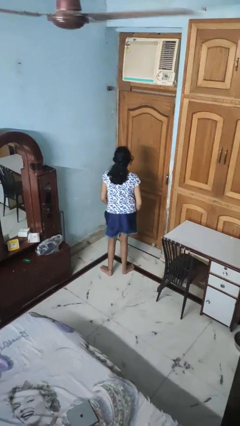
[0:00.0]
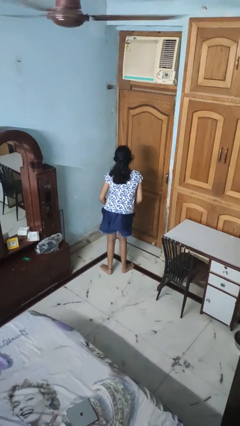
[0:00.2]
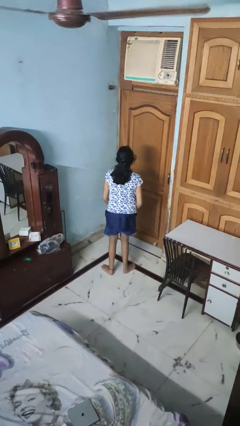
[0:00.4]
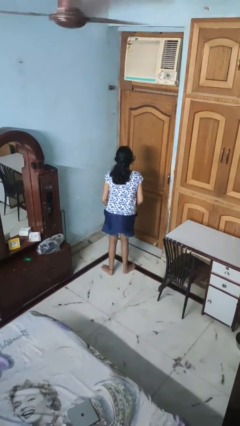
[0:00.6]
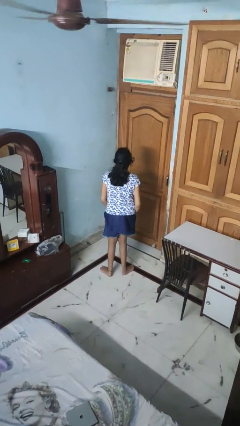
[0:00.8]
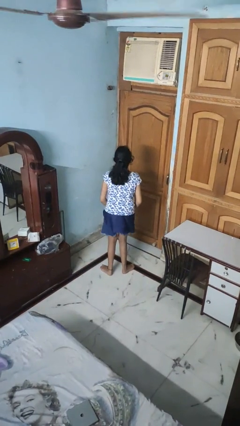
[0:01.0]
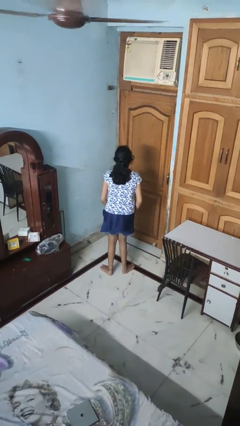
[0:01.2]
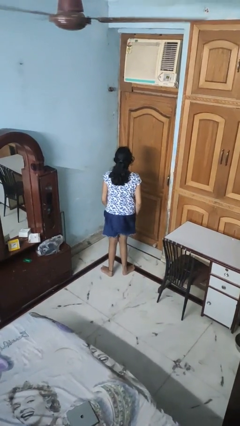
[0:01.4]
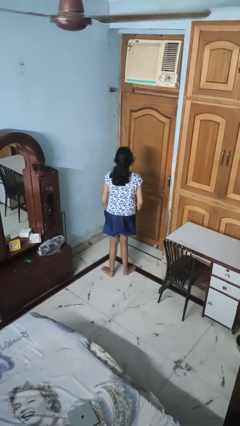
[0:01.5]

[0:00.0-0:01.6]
person wiggles hips

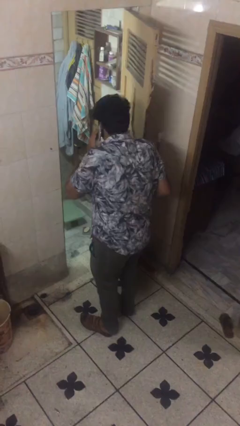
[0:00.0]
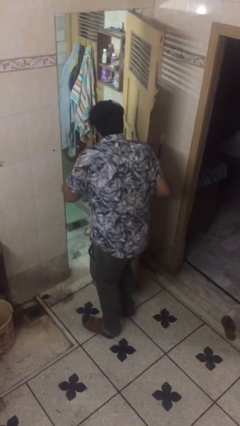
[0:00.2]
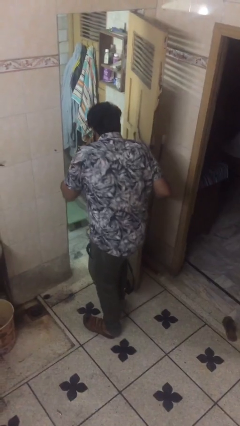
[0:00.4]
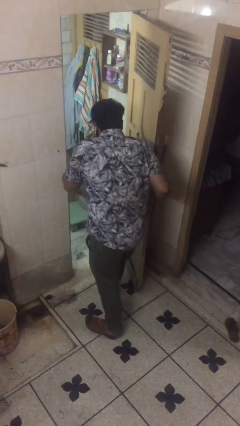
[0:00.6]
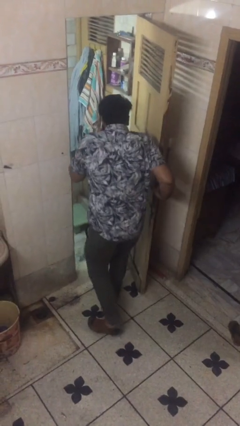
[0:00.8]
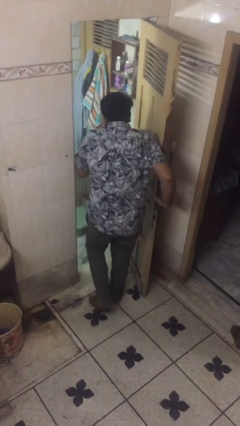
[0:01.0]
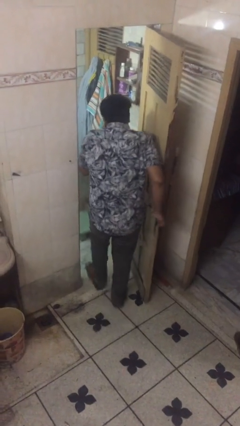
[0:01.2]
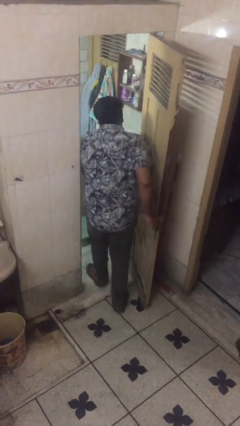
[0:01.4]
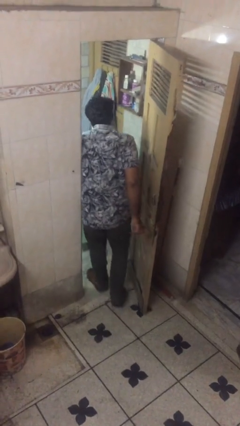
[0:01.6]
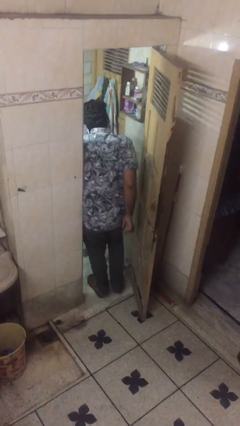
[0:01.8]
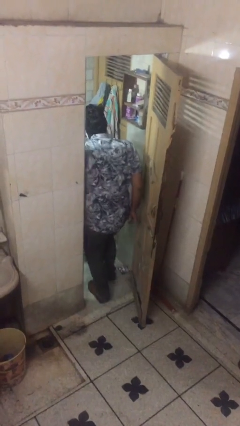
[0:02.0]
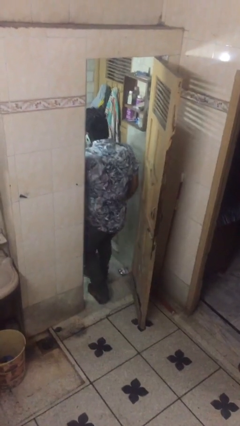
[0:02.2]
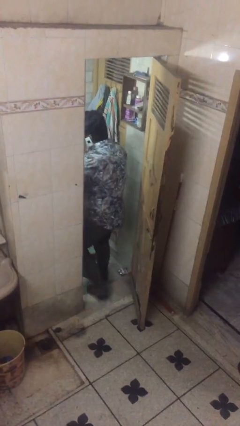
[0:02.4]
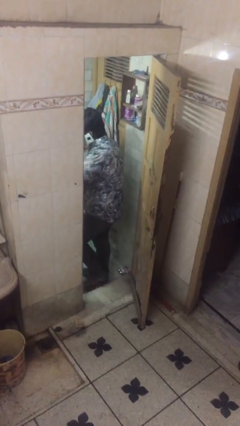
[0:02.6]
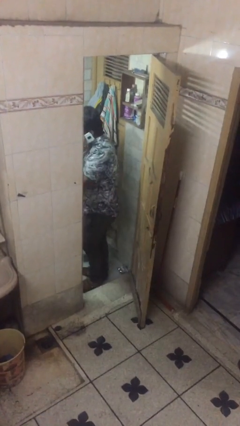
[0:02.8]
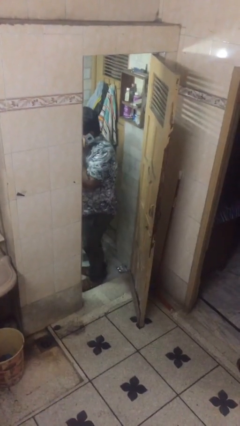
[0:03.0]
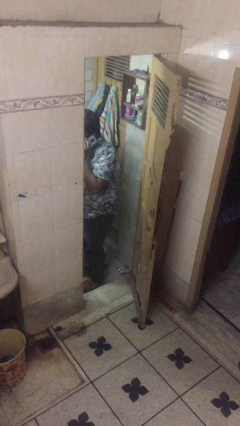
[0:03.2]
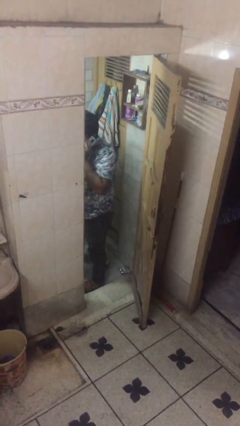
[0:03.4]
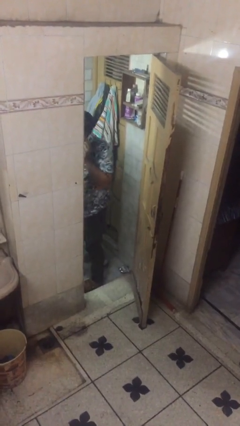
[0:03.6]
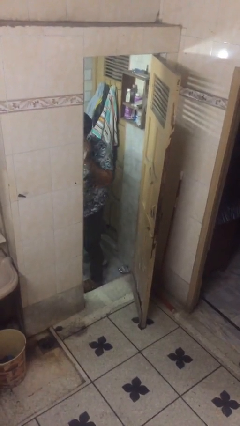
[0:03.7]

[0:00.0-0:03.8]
person exits scene through structure

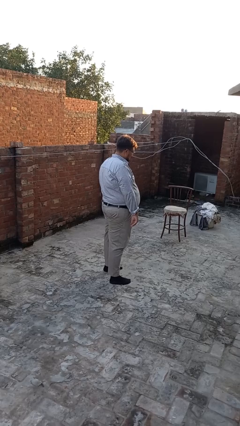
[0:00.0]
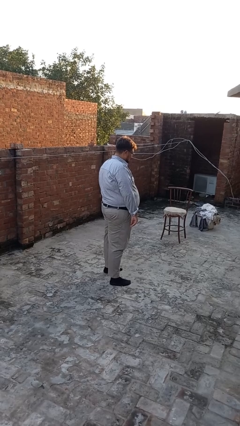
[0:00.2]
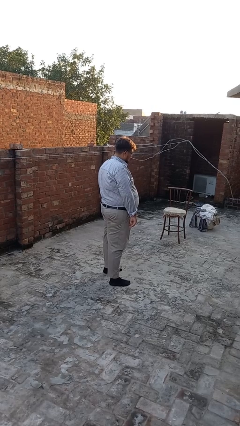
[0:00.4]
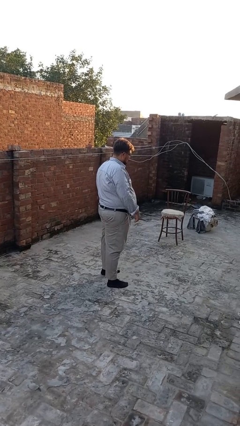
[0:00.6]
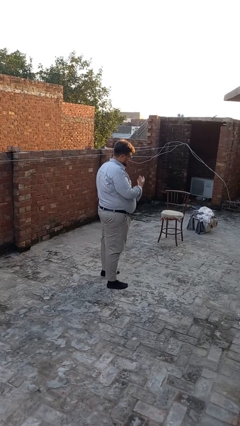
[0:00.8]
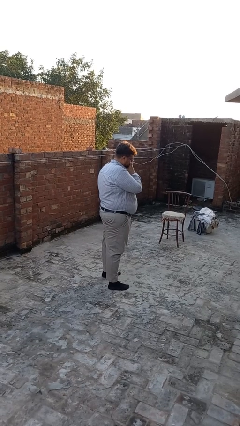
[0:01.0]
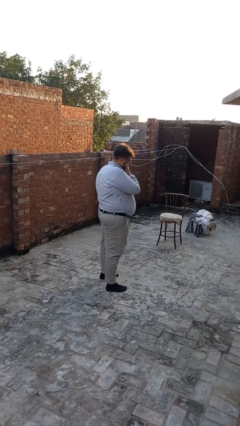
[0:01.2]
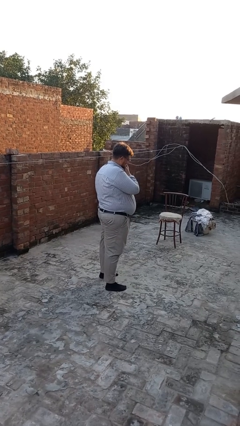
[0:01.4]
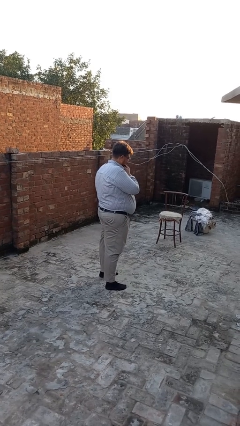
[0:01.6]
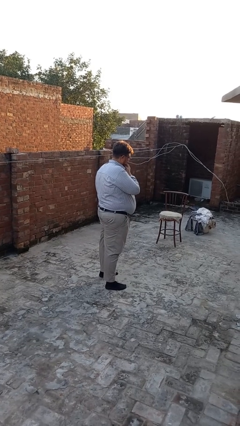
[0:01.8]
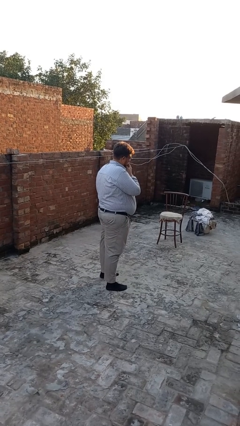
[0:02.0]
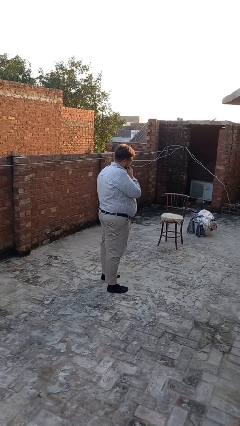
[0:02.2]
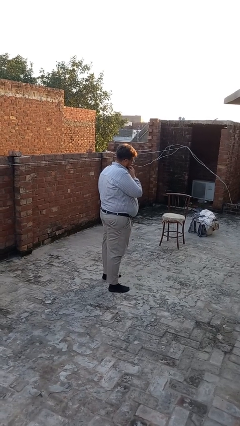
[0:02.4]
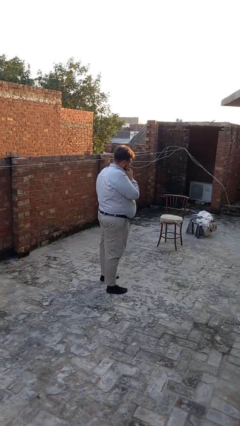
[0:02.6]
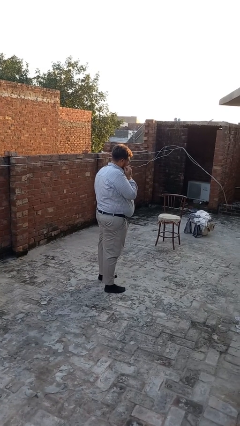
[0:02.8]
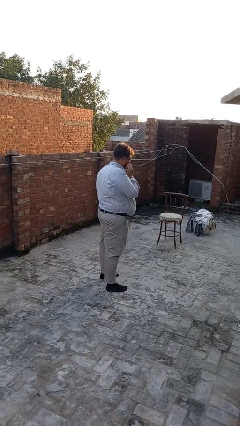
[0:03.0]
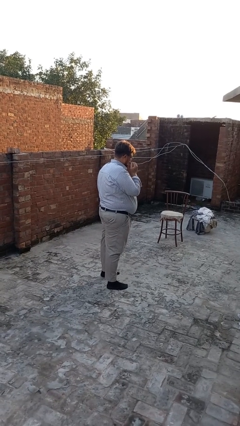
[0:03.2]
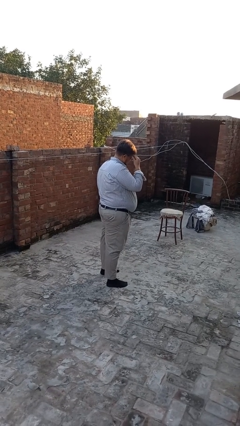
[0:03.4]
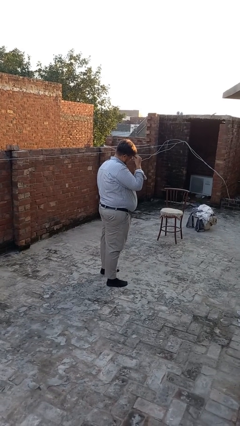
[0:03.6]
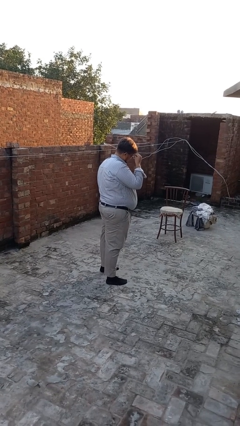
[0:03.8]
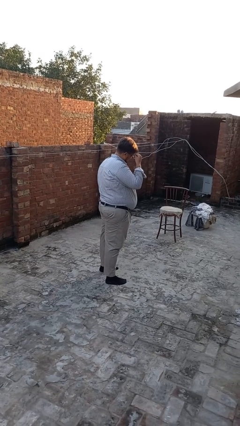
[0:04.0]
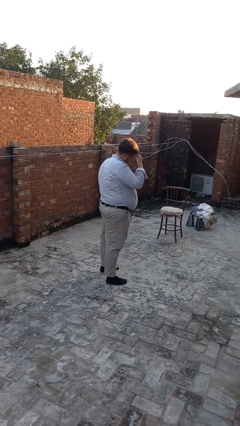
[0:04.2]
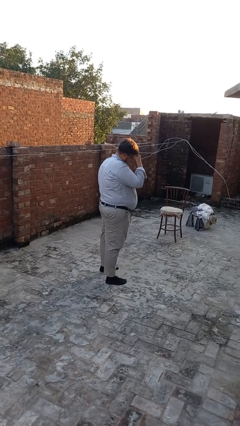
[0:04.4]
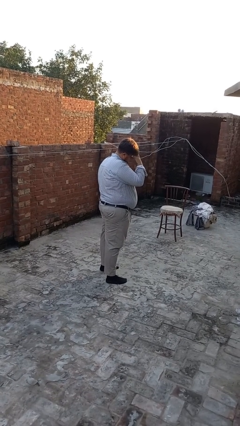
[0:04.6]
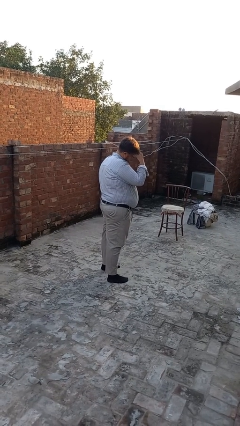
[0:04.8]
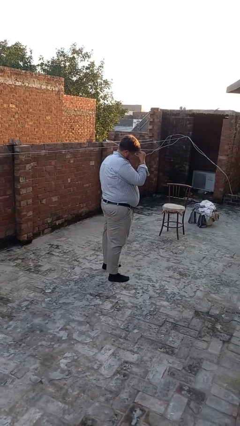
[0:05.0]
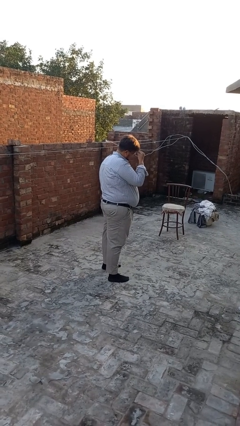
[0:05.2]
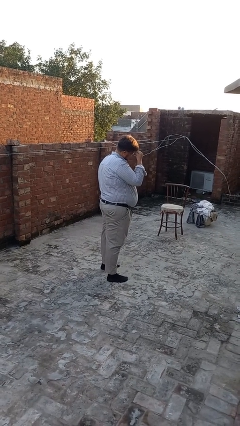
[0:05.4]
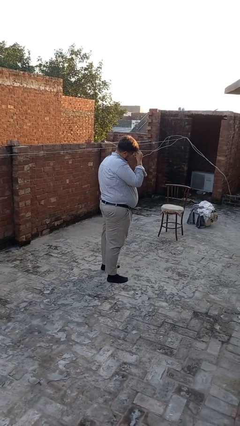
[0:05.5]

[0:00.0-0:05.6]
person scratches face

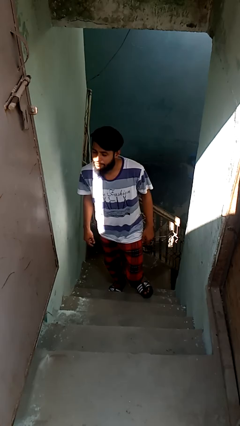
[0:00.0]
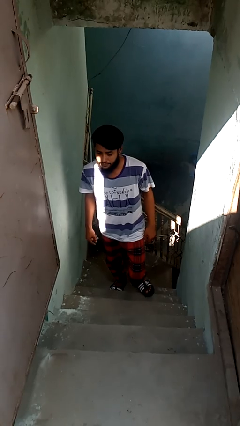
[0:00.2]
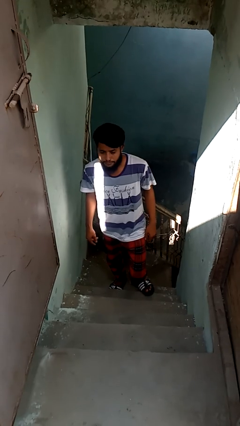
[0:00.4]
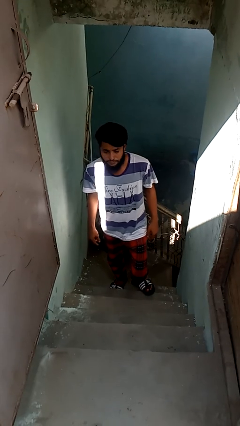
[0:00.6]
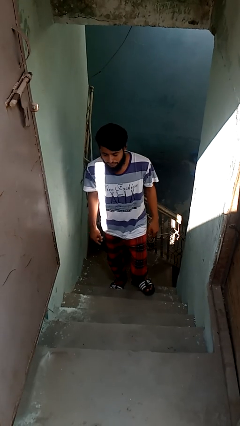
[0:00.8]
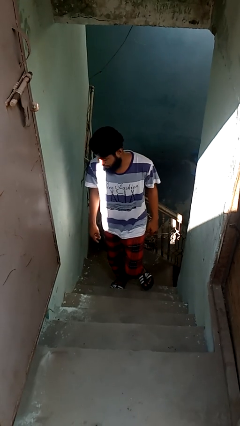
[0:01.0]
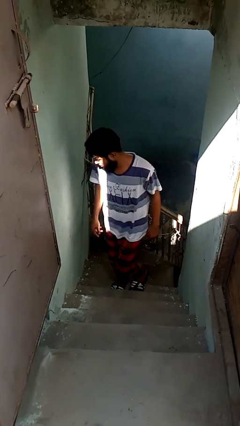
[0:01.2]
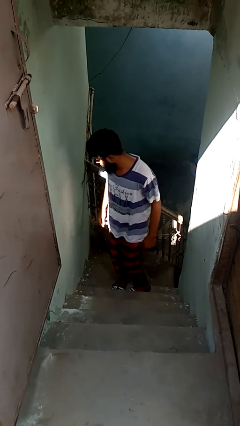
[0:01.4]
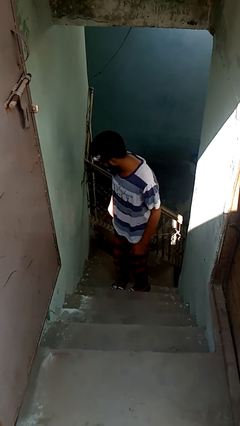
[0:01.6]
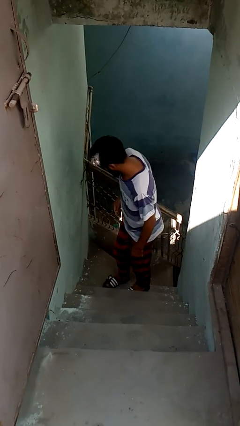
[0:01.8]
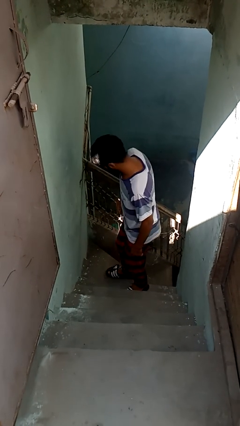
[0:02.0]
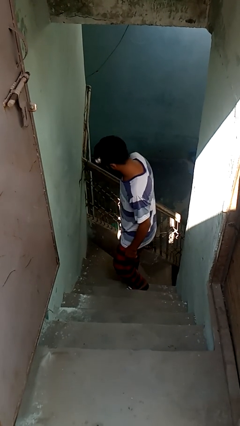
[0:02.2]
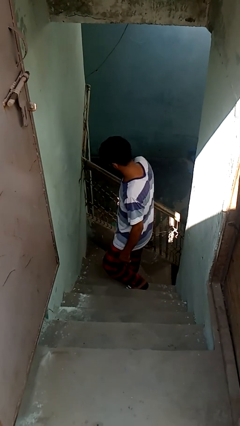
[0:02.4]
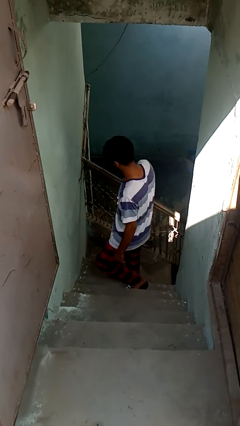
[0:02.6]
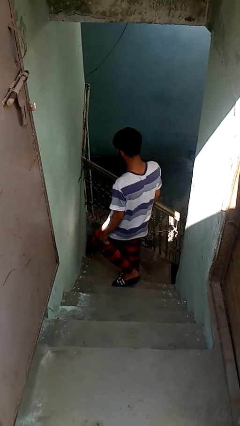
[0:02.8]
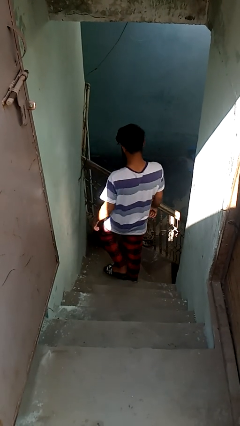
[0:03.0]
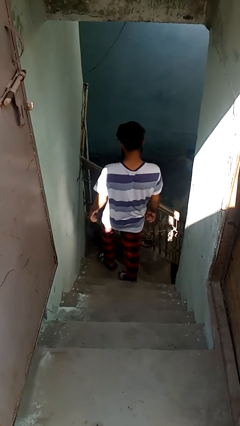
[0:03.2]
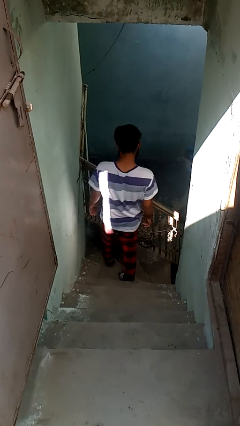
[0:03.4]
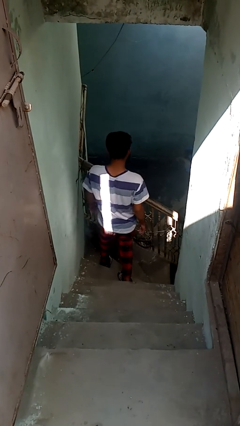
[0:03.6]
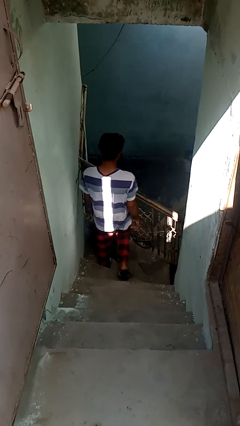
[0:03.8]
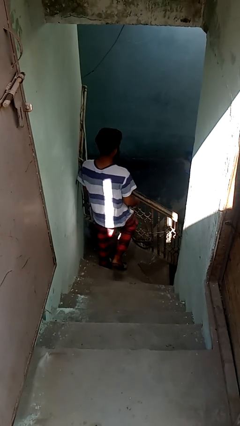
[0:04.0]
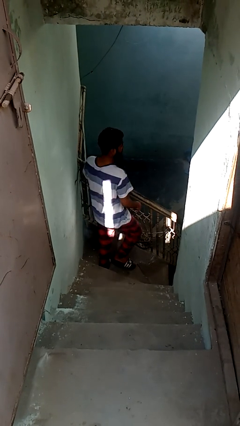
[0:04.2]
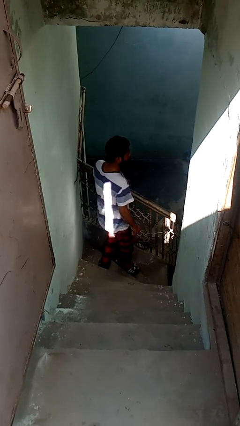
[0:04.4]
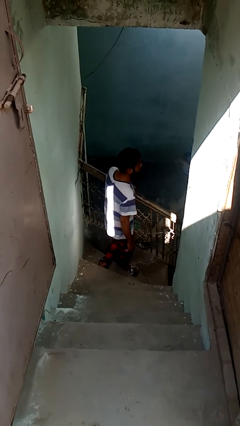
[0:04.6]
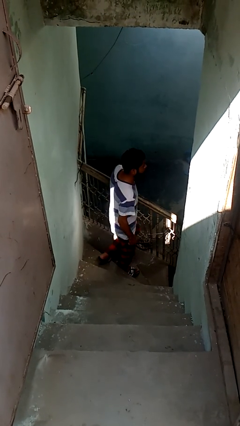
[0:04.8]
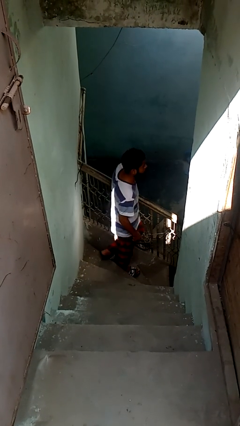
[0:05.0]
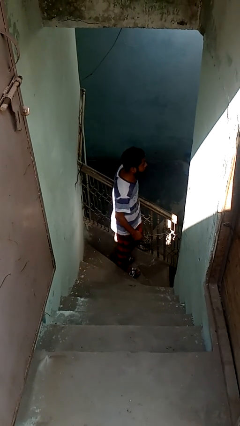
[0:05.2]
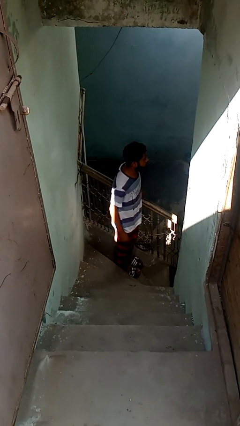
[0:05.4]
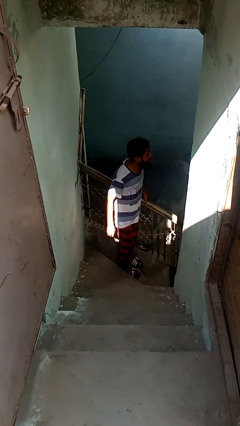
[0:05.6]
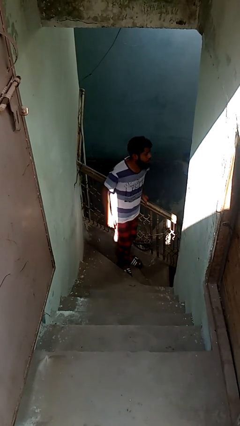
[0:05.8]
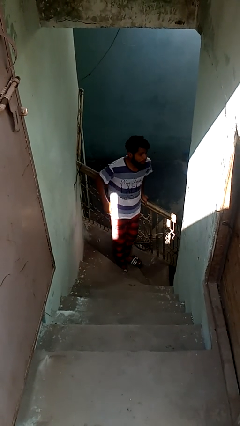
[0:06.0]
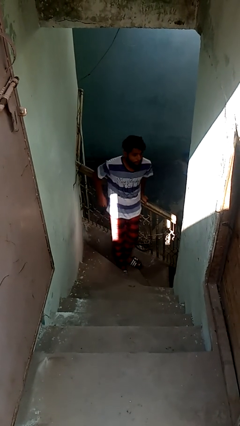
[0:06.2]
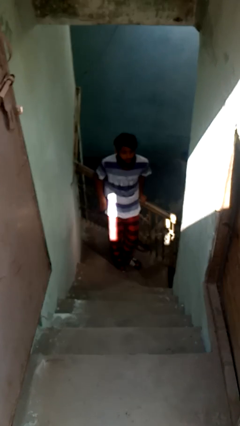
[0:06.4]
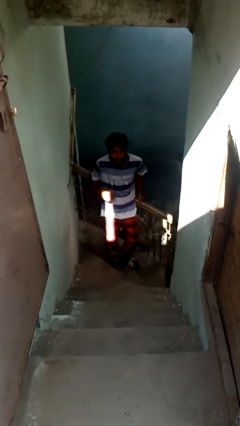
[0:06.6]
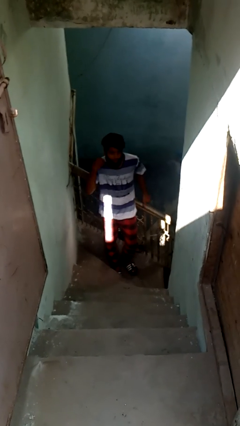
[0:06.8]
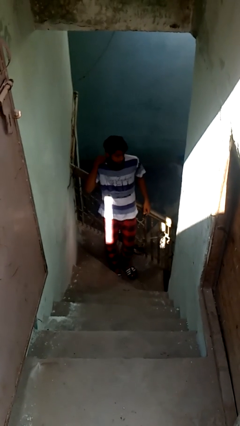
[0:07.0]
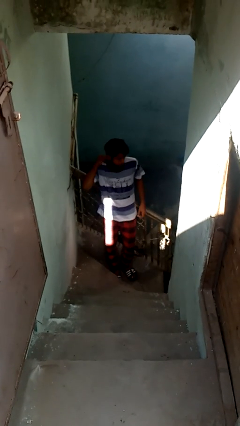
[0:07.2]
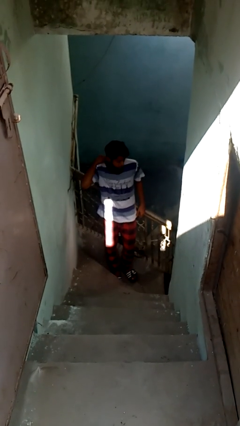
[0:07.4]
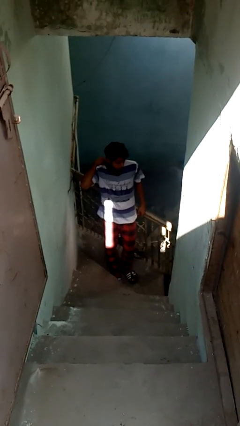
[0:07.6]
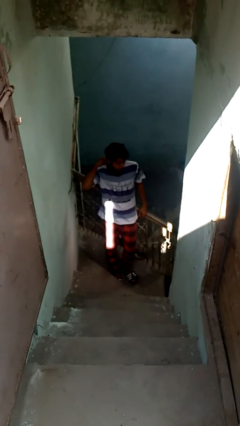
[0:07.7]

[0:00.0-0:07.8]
person climbs down stairs
